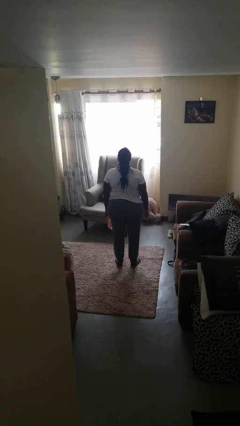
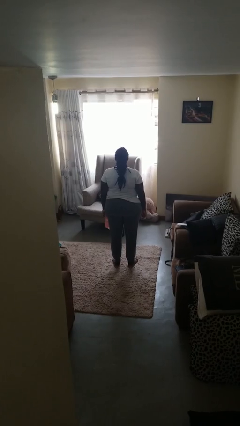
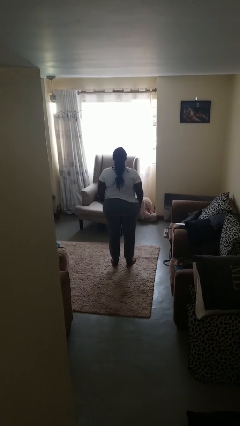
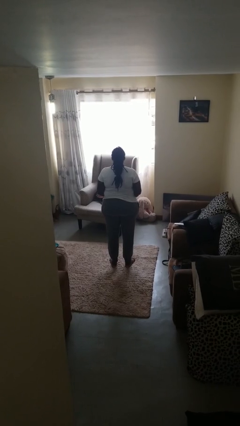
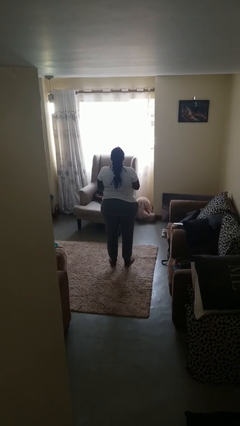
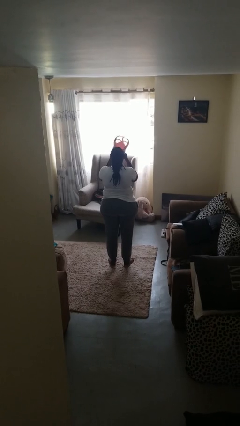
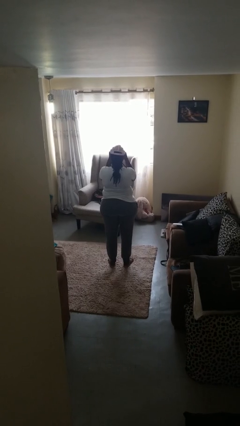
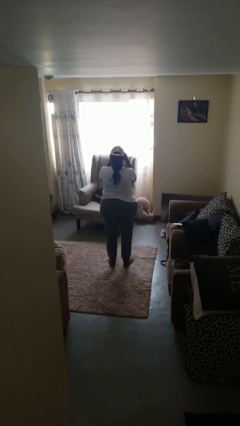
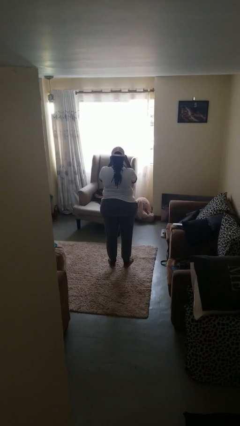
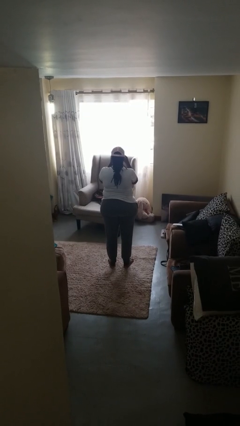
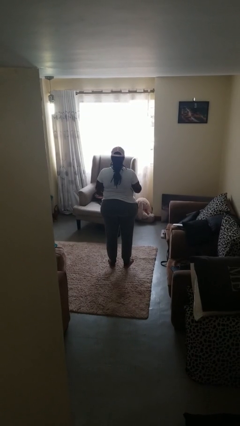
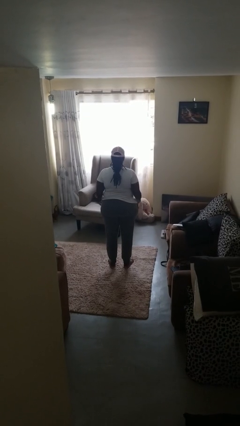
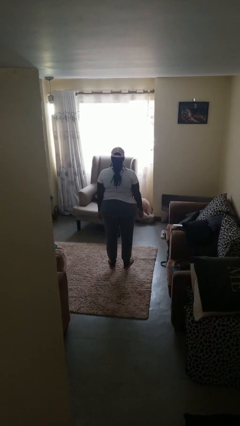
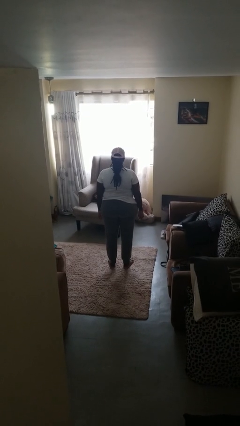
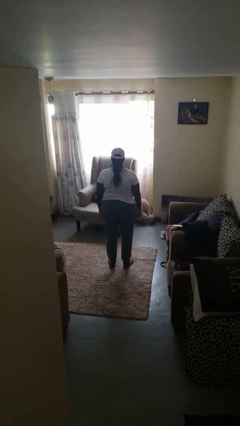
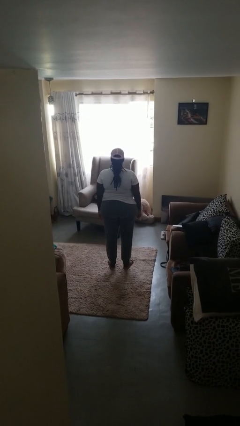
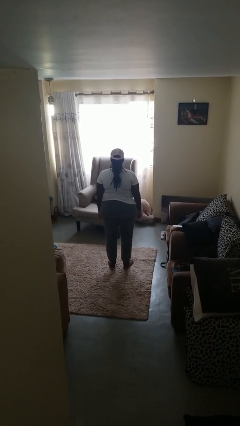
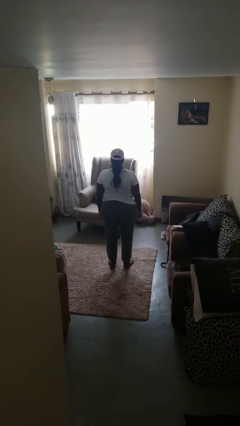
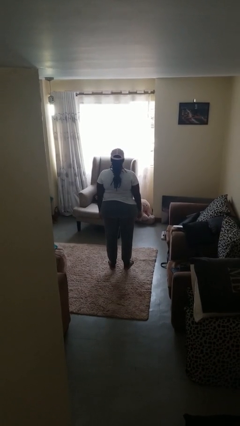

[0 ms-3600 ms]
person puts on hat

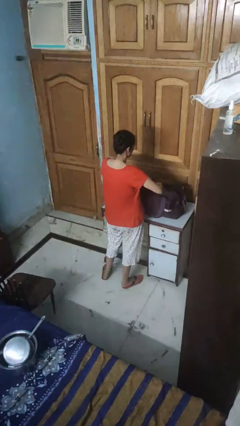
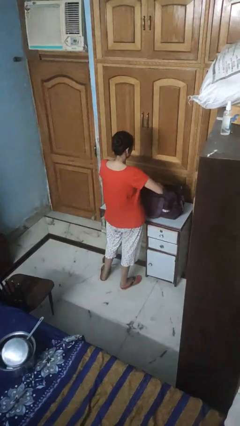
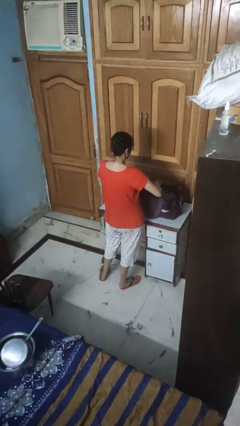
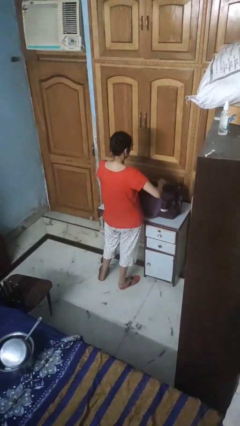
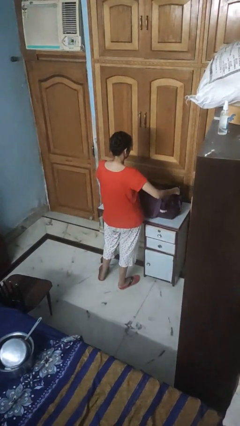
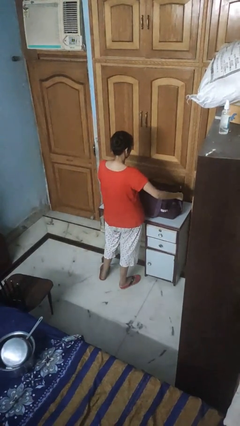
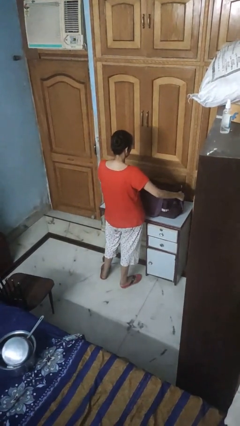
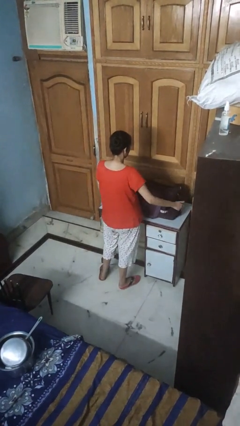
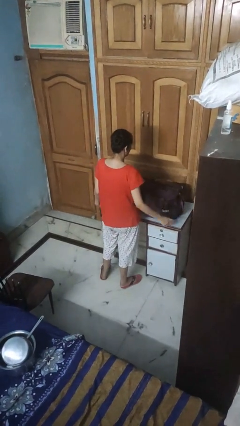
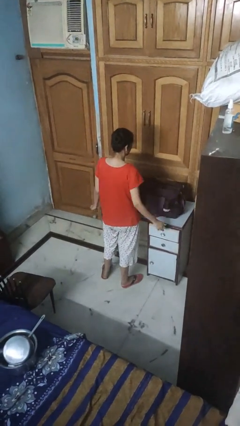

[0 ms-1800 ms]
person opens suitcase

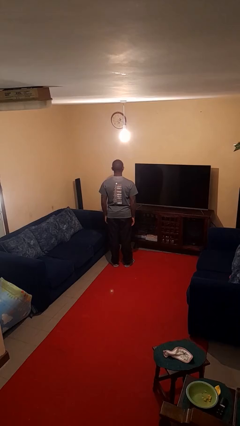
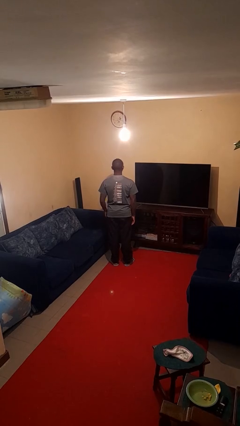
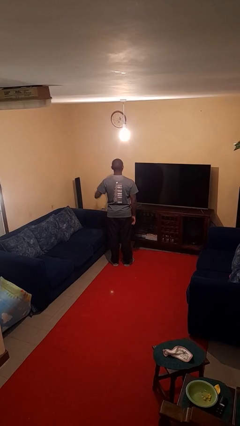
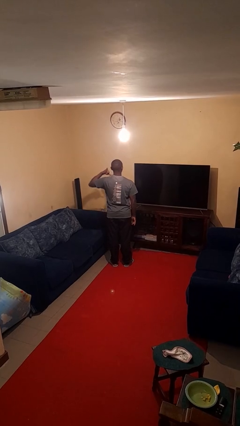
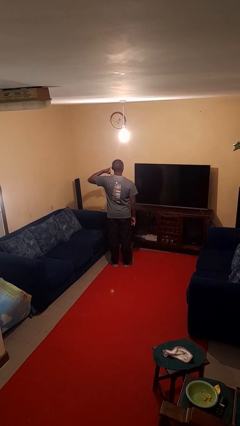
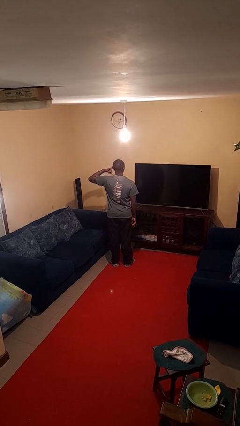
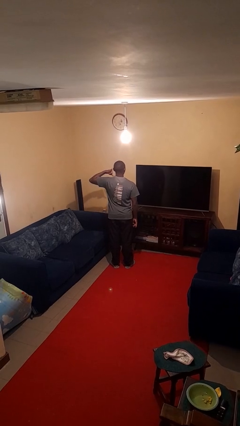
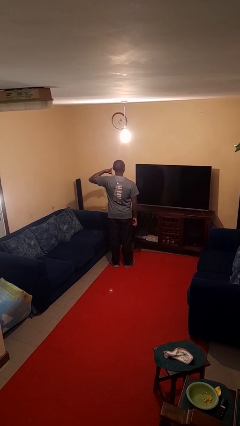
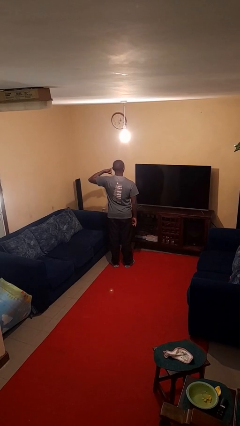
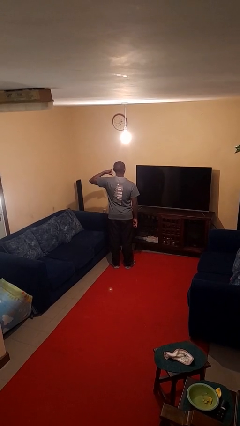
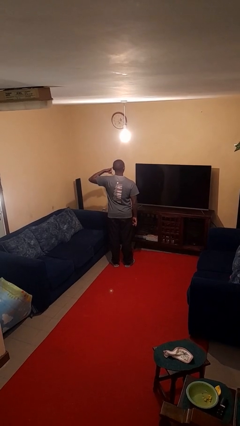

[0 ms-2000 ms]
person gestures call me

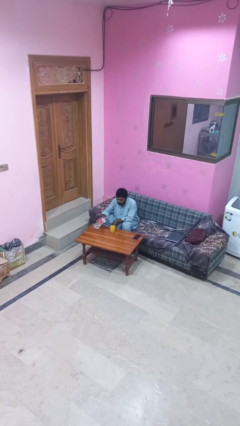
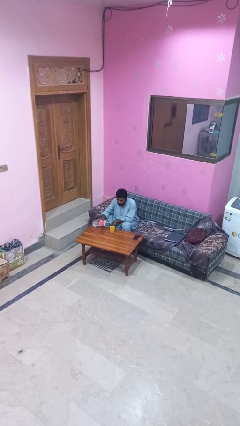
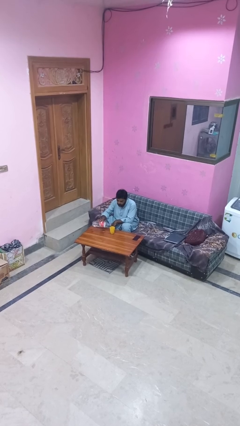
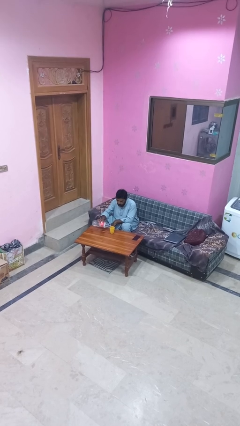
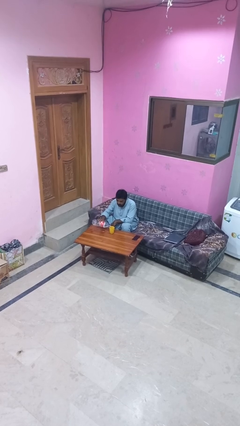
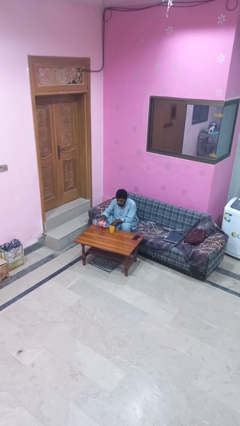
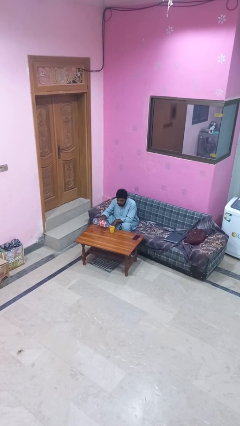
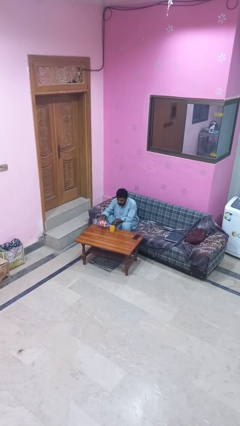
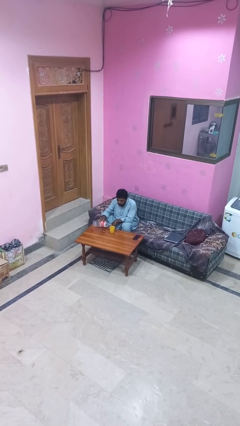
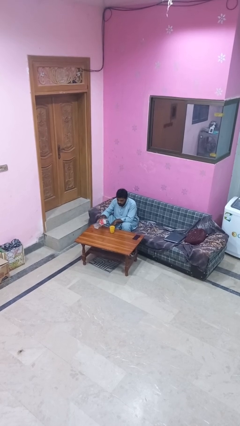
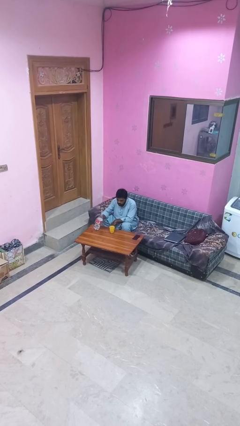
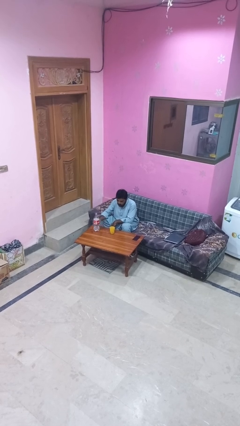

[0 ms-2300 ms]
person pours liquid into cup

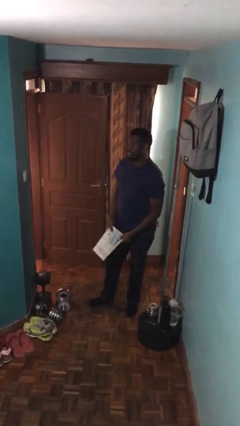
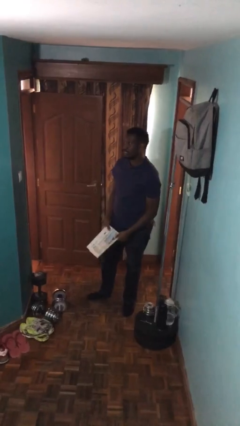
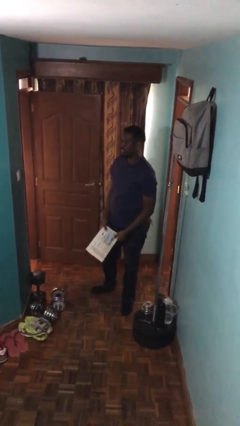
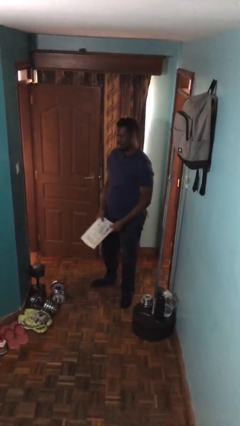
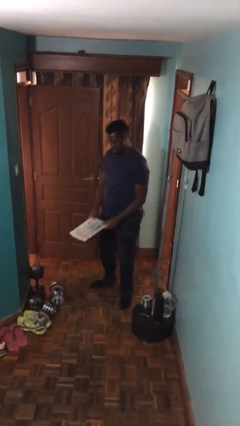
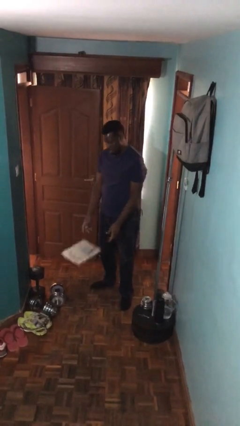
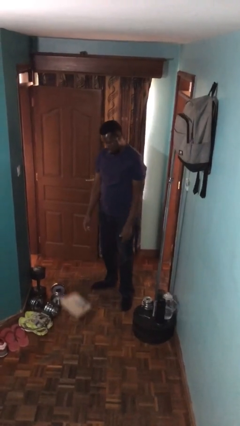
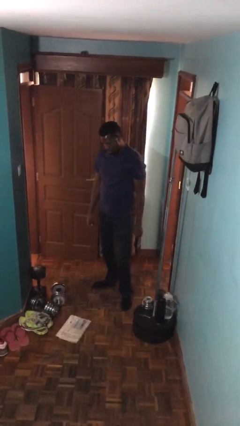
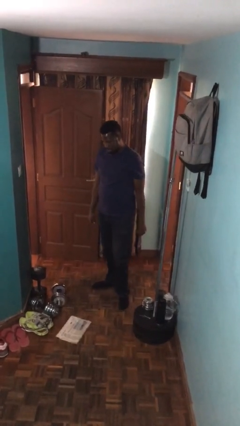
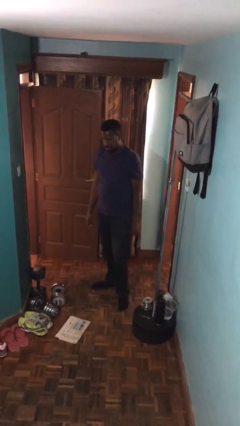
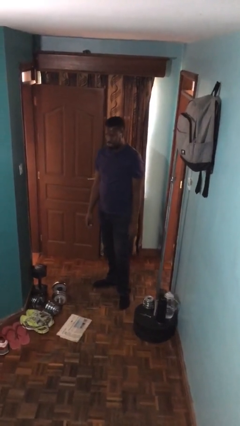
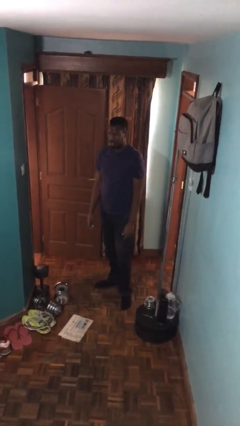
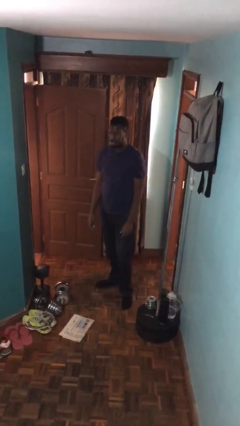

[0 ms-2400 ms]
person drops object

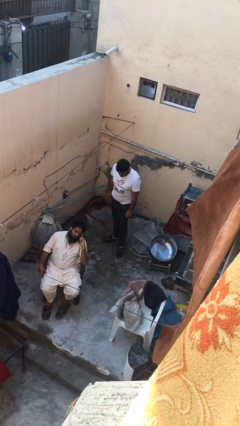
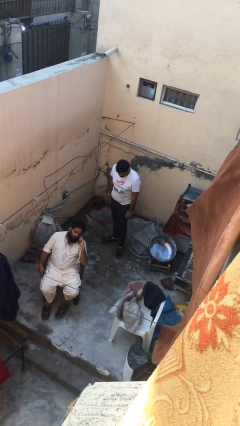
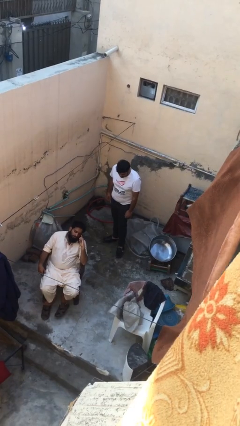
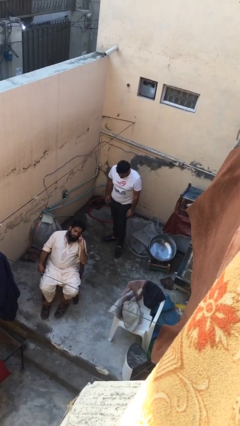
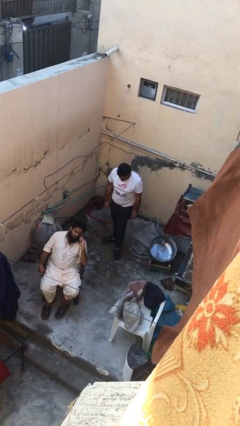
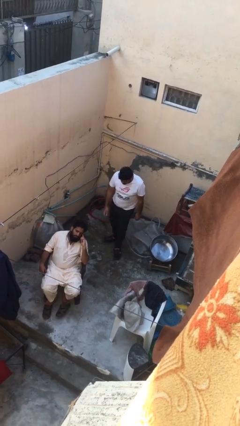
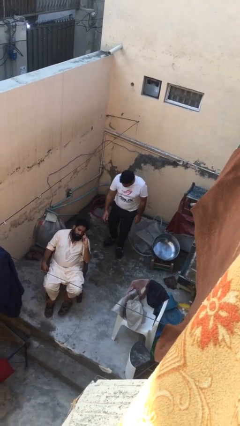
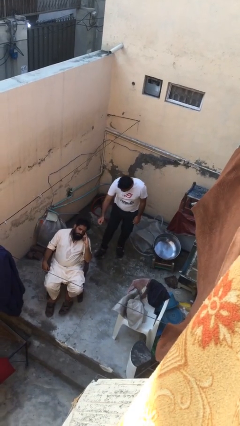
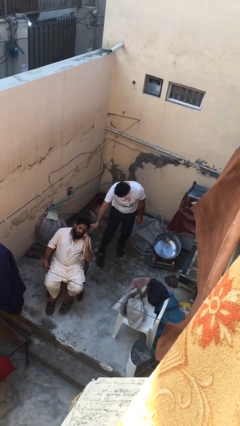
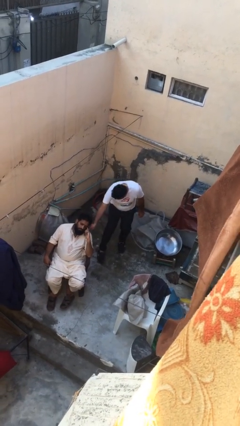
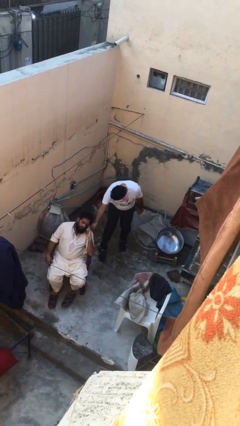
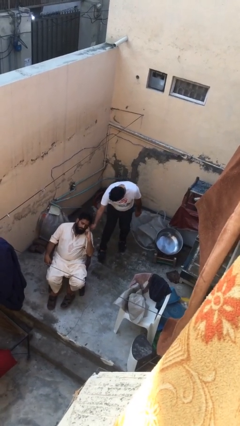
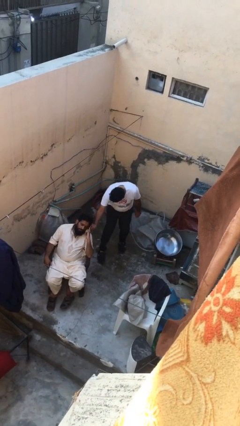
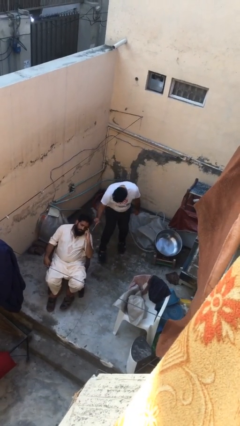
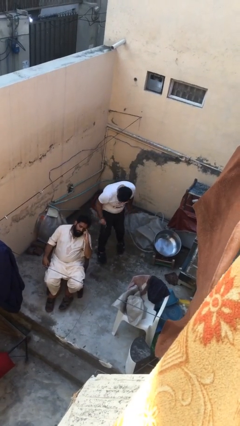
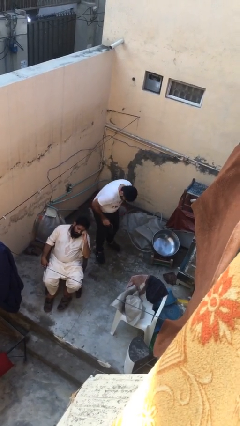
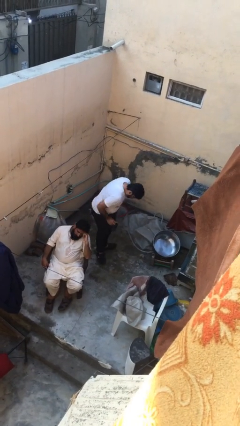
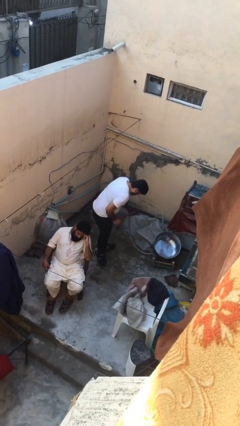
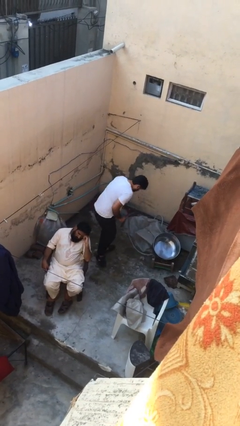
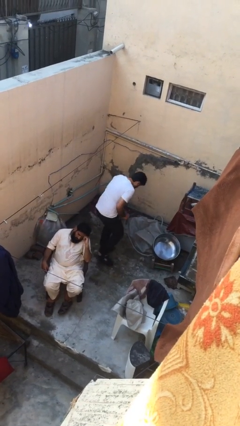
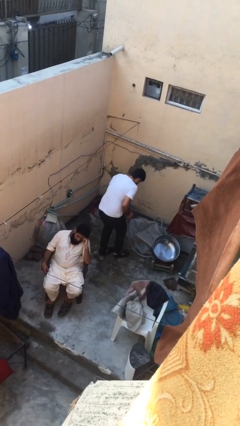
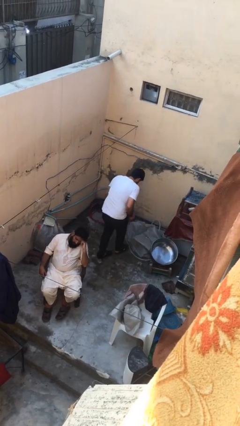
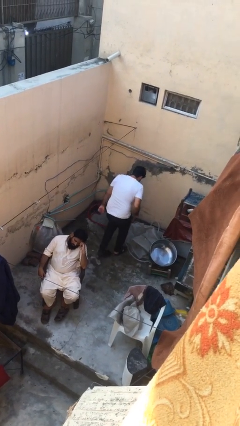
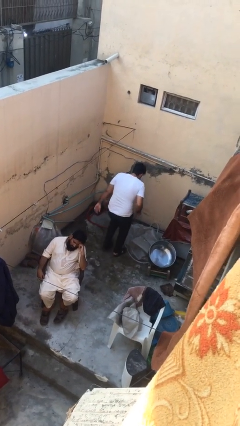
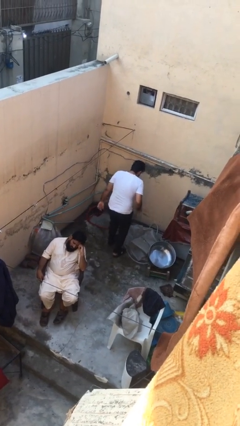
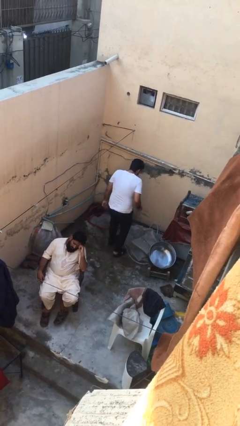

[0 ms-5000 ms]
person steals object from person
